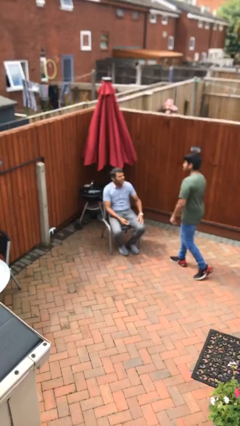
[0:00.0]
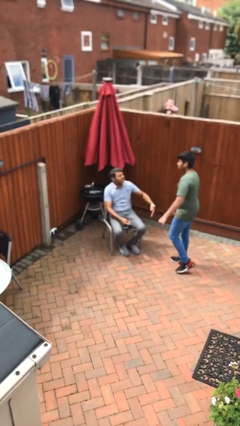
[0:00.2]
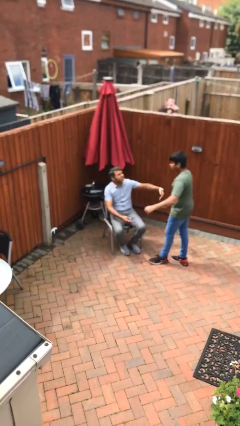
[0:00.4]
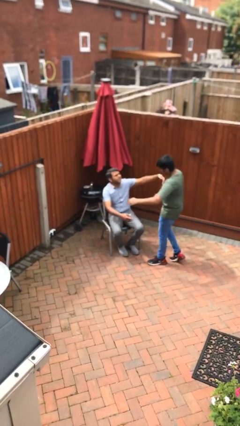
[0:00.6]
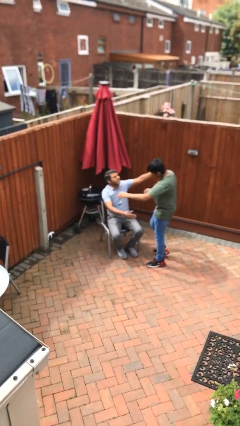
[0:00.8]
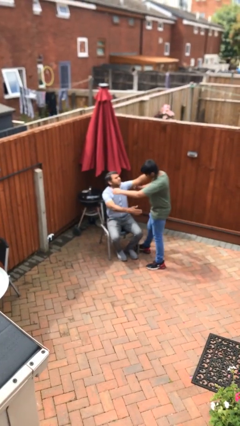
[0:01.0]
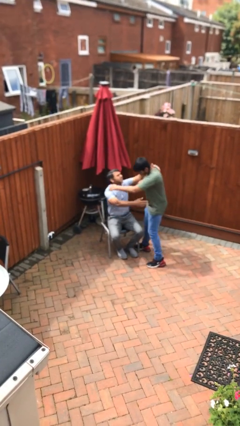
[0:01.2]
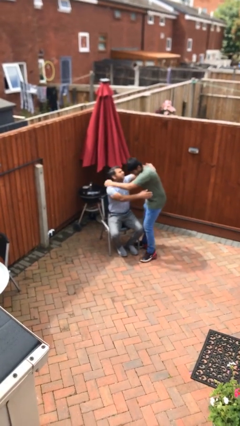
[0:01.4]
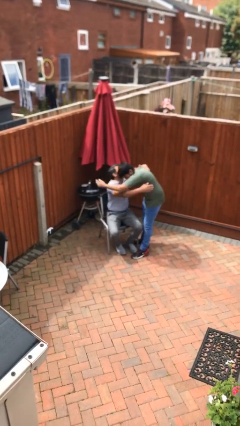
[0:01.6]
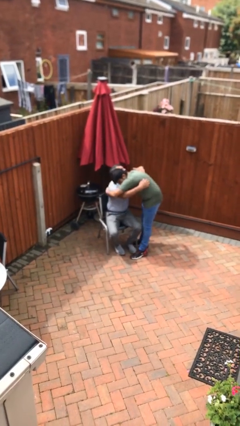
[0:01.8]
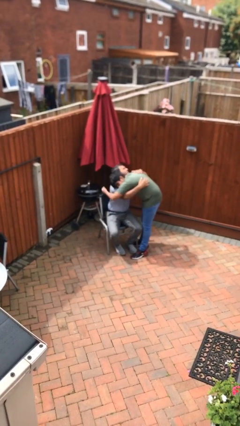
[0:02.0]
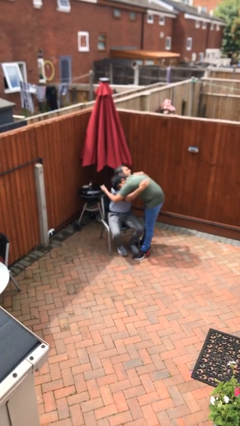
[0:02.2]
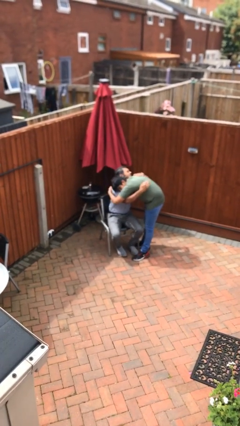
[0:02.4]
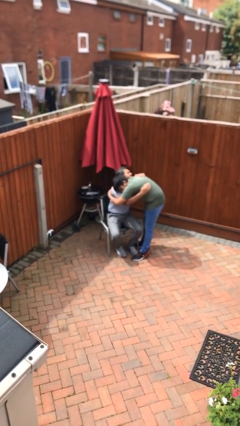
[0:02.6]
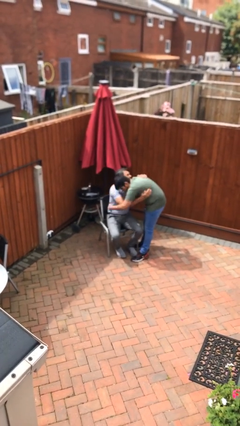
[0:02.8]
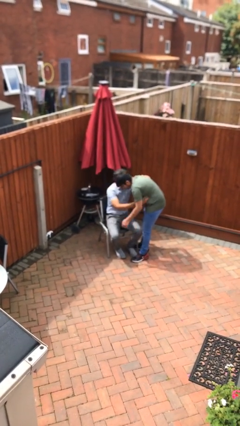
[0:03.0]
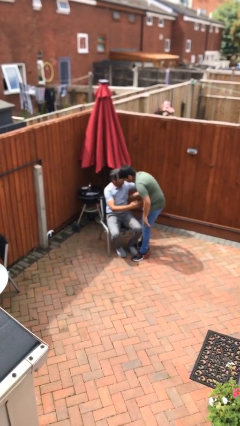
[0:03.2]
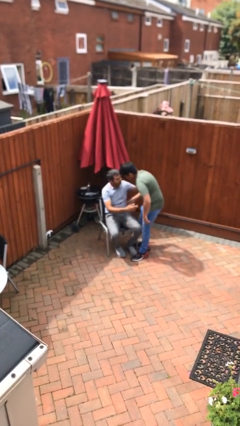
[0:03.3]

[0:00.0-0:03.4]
person embraces person

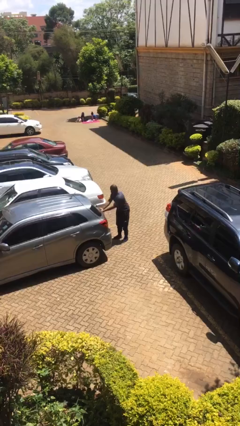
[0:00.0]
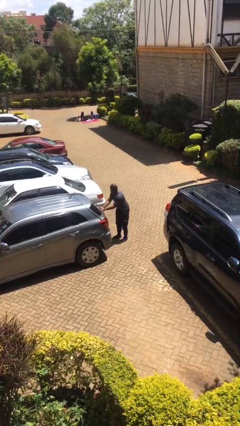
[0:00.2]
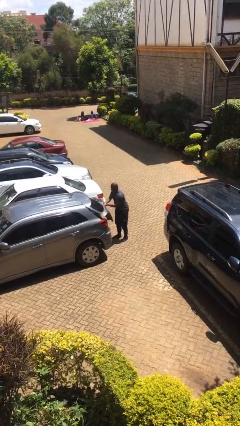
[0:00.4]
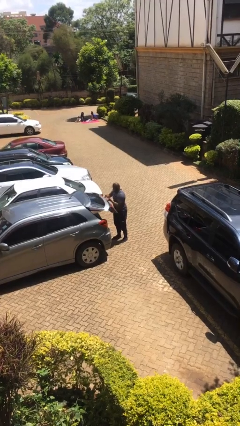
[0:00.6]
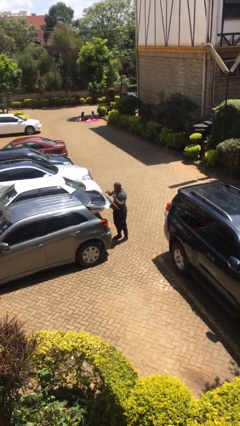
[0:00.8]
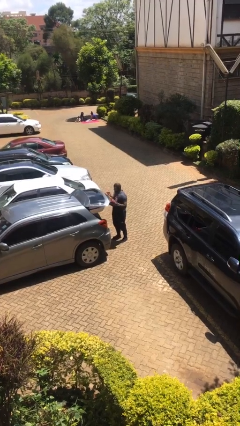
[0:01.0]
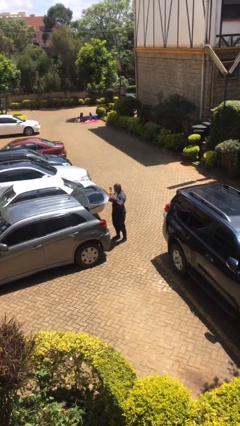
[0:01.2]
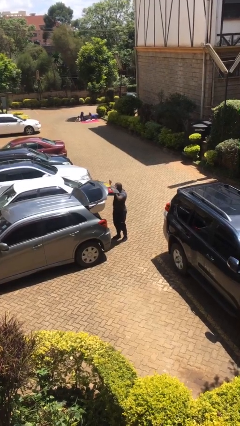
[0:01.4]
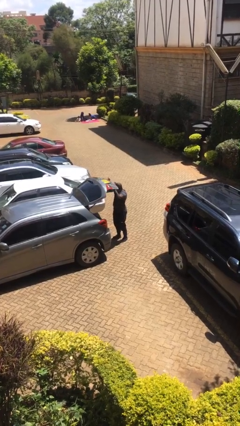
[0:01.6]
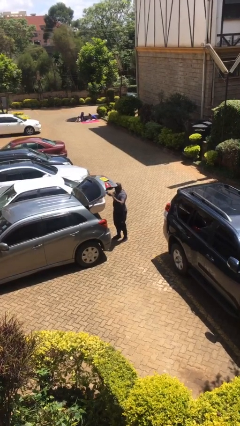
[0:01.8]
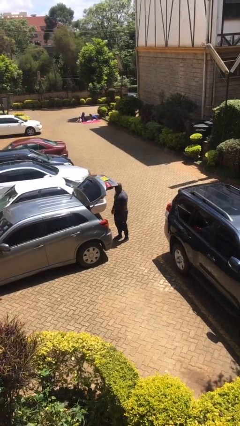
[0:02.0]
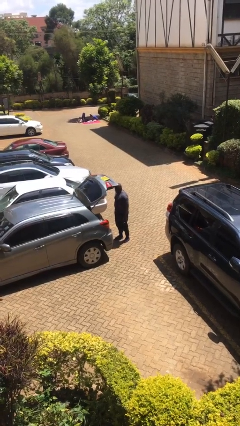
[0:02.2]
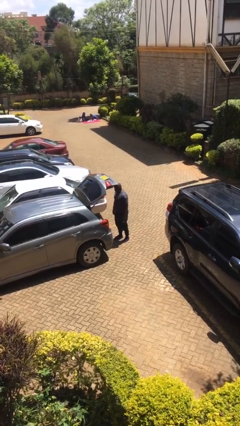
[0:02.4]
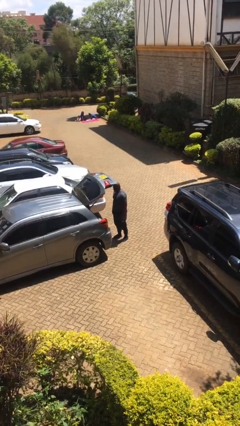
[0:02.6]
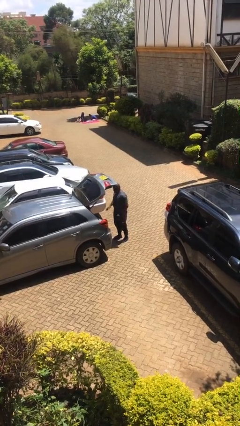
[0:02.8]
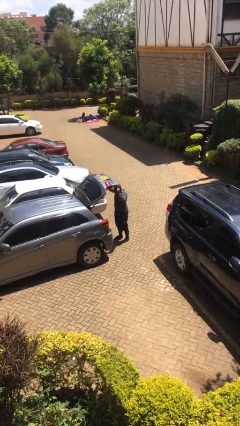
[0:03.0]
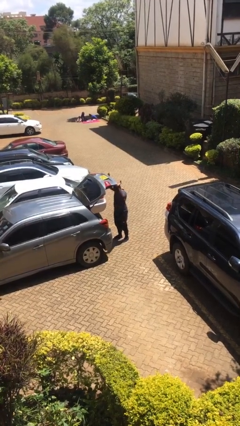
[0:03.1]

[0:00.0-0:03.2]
person opens car trunk

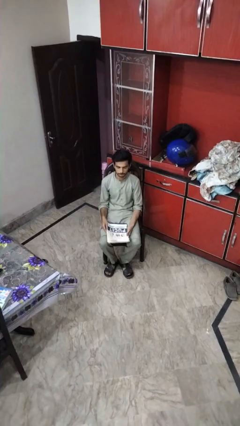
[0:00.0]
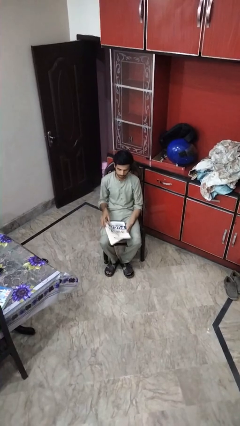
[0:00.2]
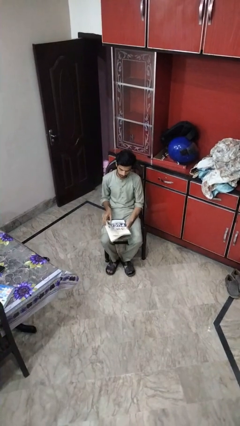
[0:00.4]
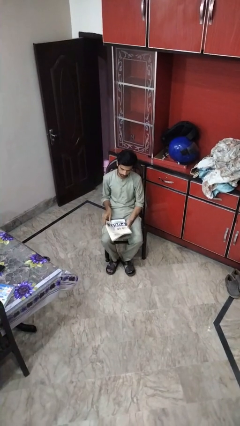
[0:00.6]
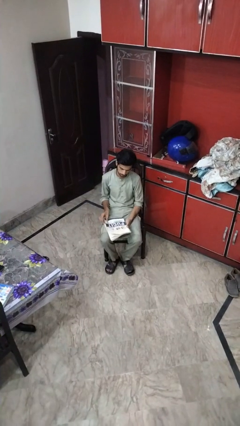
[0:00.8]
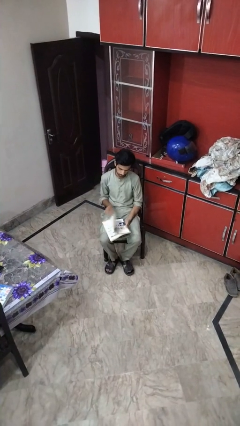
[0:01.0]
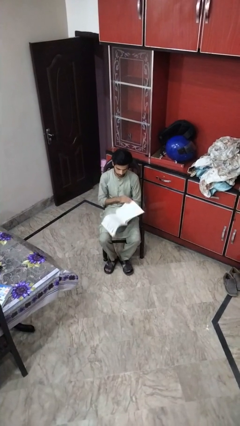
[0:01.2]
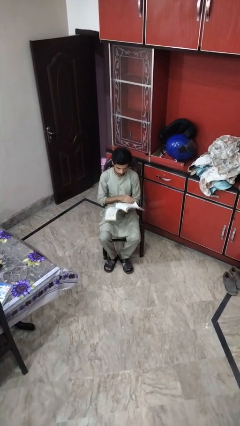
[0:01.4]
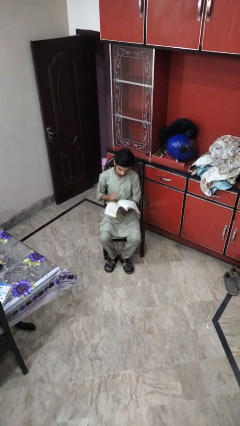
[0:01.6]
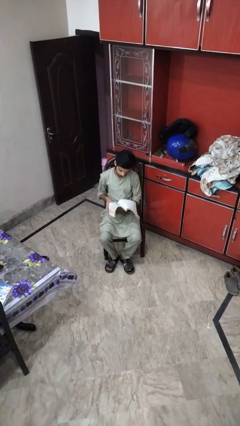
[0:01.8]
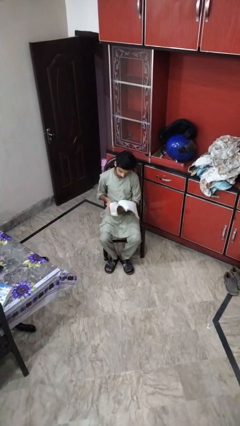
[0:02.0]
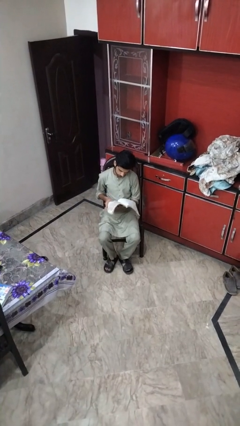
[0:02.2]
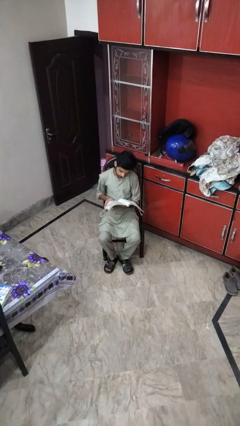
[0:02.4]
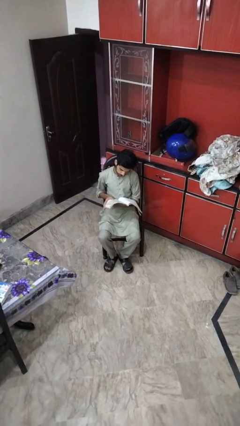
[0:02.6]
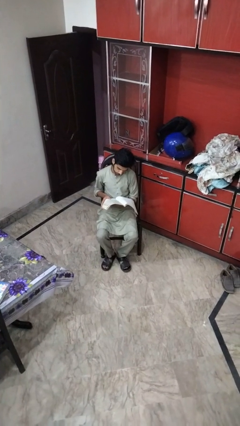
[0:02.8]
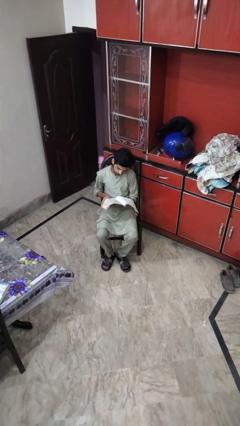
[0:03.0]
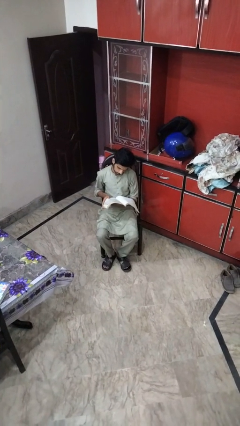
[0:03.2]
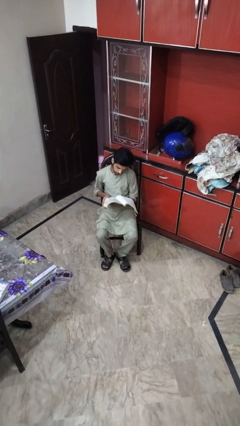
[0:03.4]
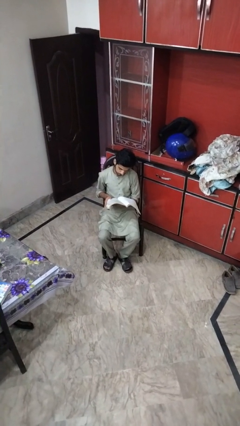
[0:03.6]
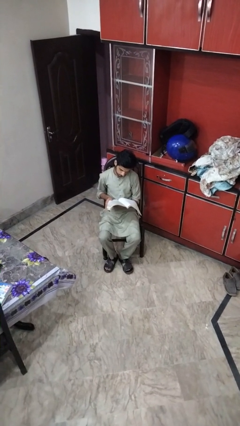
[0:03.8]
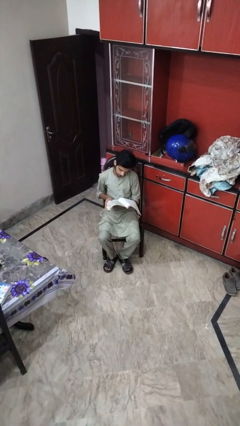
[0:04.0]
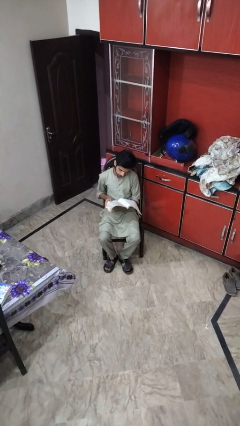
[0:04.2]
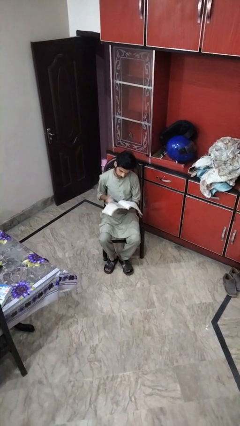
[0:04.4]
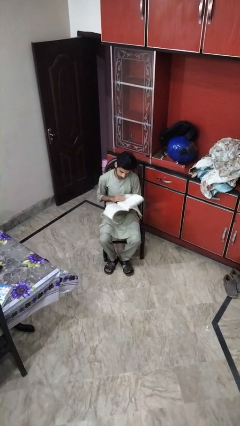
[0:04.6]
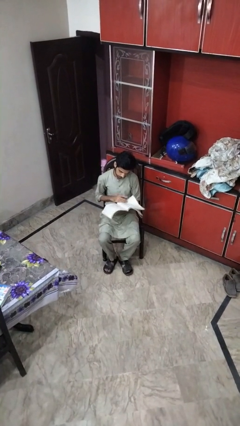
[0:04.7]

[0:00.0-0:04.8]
person reads magazine

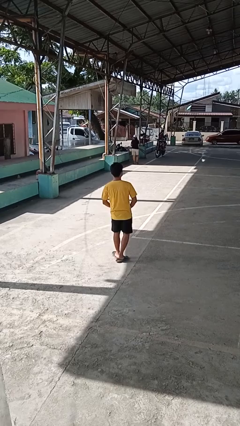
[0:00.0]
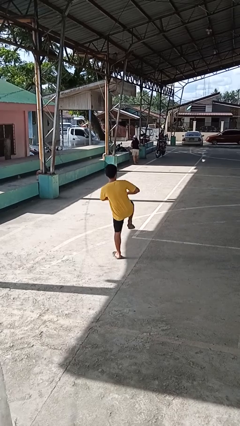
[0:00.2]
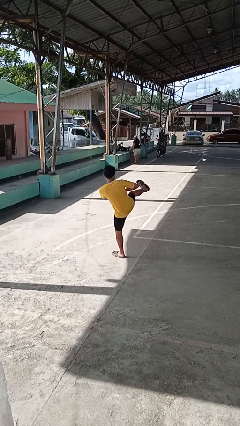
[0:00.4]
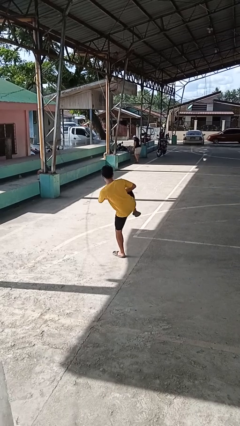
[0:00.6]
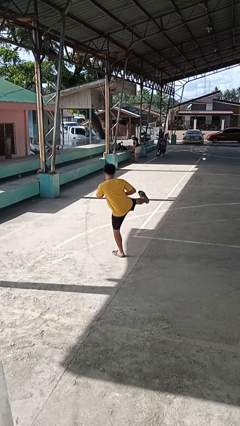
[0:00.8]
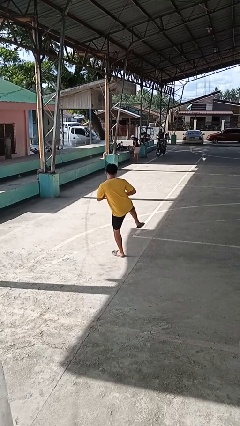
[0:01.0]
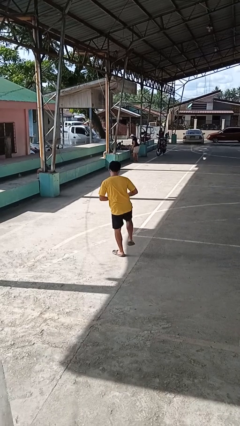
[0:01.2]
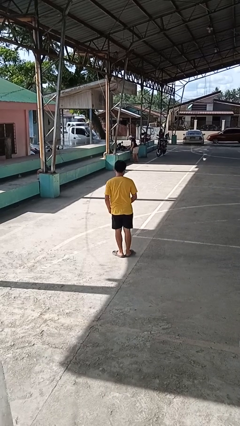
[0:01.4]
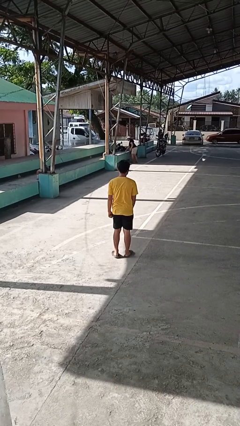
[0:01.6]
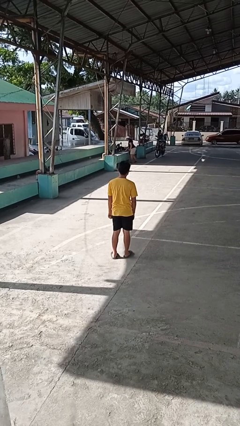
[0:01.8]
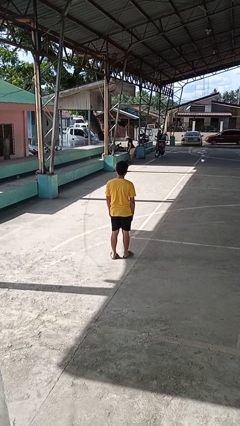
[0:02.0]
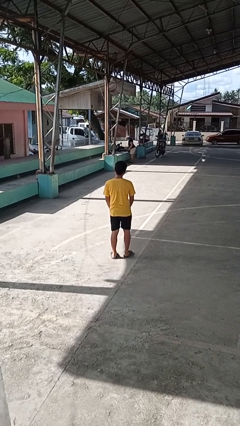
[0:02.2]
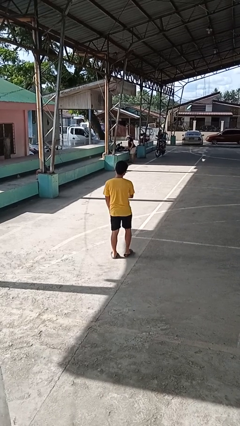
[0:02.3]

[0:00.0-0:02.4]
person karate kicks

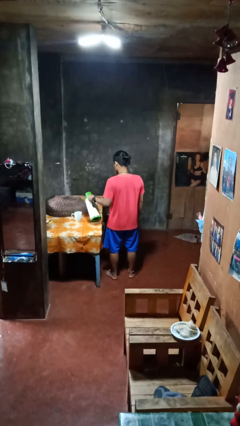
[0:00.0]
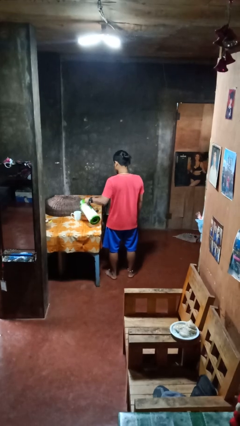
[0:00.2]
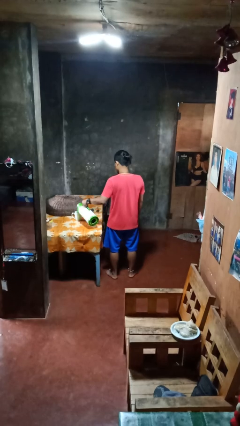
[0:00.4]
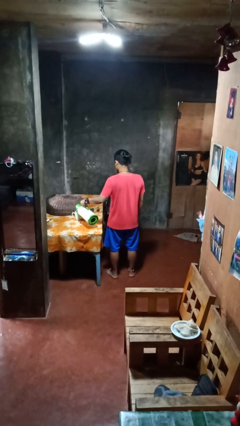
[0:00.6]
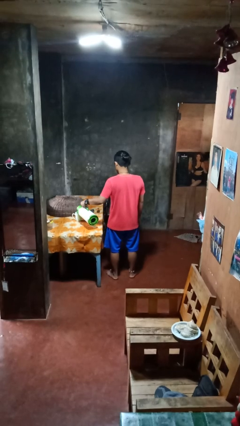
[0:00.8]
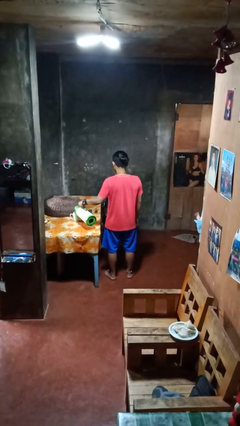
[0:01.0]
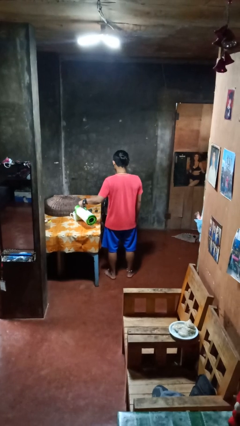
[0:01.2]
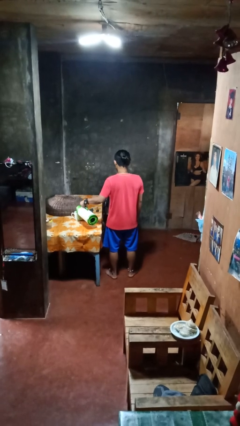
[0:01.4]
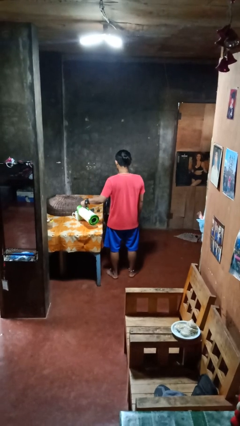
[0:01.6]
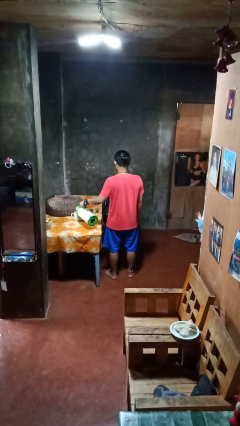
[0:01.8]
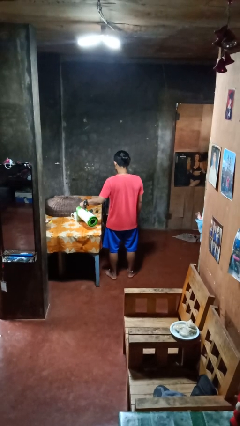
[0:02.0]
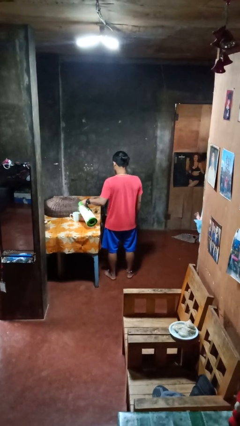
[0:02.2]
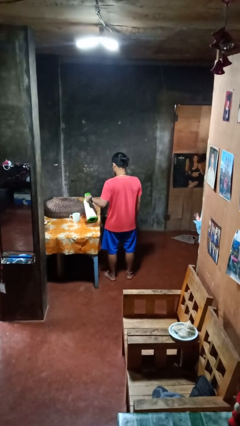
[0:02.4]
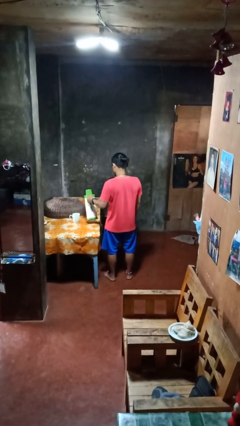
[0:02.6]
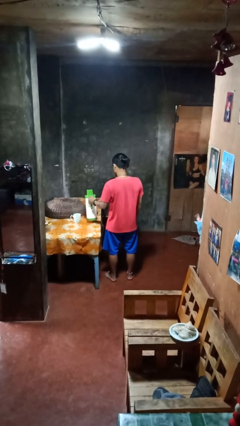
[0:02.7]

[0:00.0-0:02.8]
person pours coffee into mug

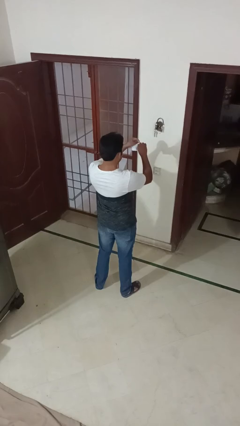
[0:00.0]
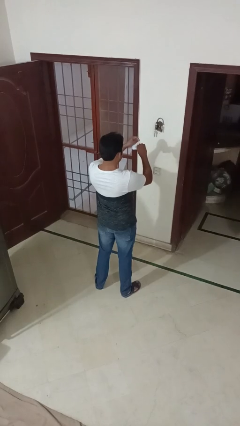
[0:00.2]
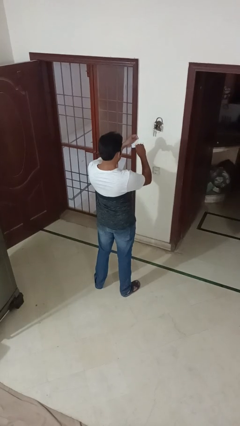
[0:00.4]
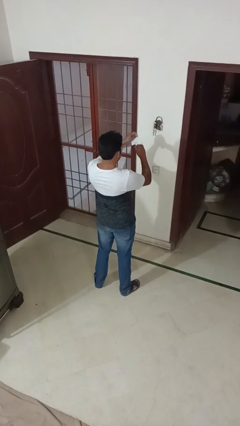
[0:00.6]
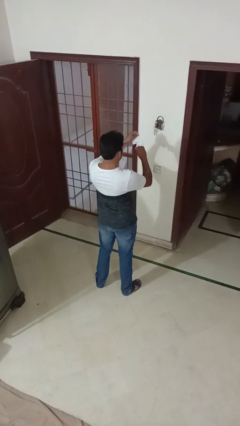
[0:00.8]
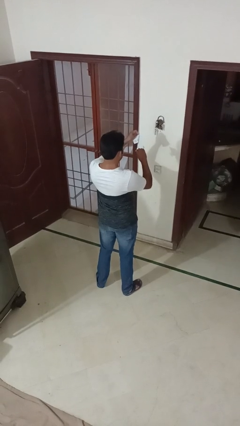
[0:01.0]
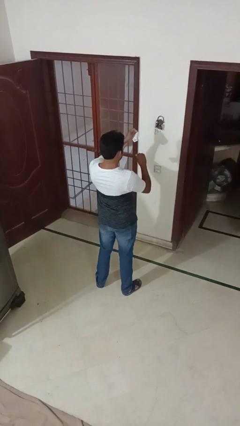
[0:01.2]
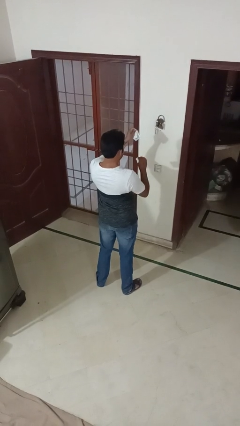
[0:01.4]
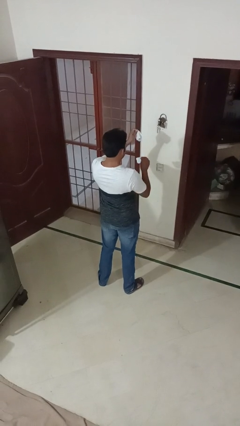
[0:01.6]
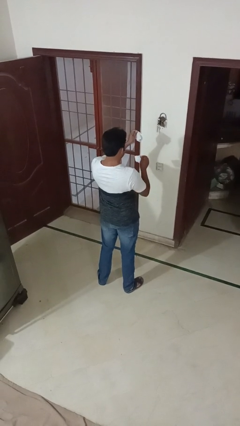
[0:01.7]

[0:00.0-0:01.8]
person tears paper
